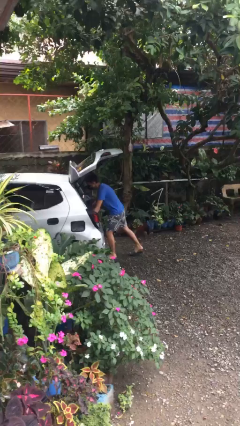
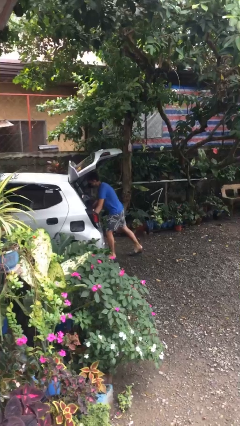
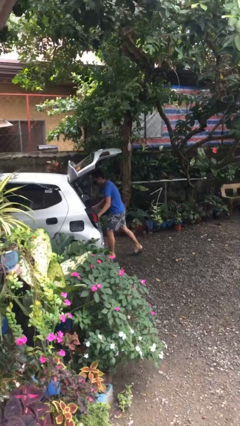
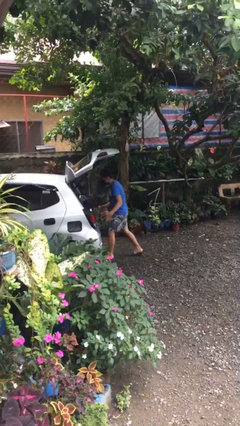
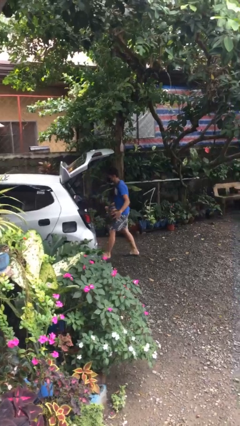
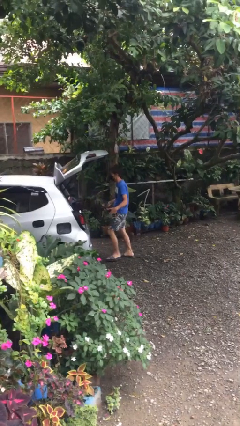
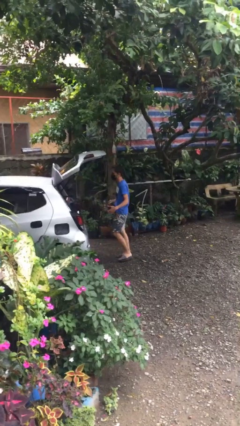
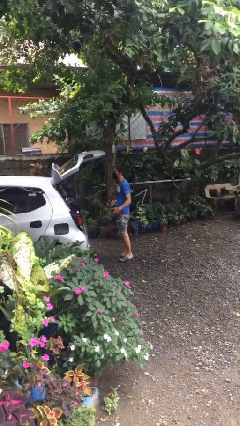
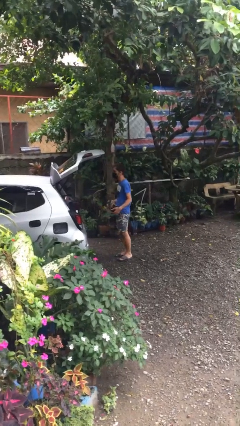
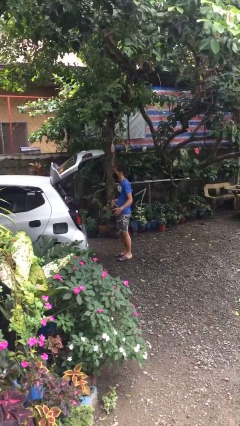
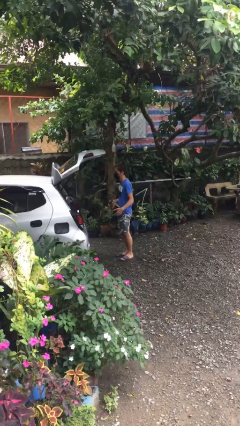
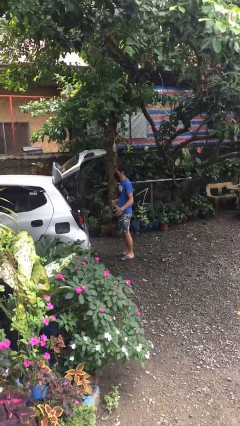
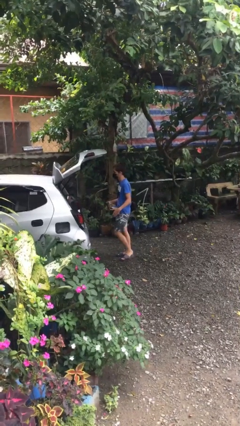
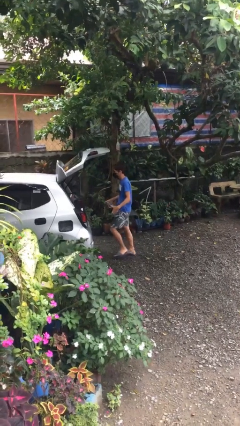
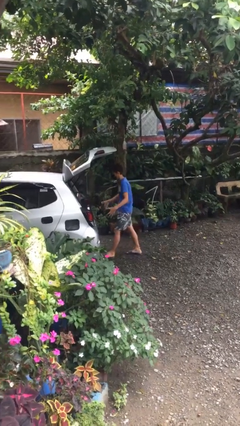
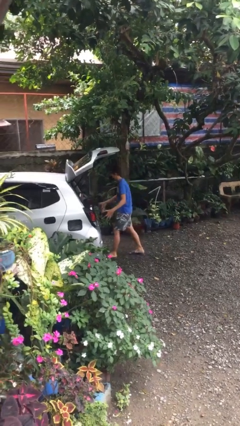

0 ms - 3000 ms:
person unloads car

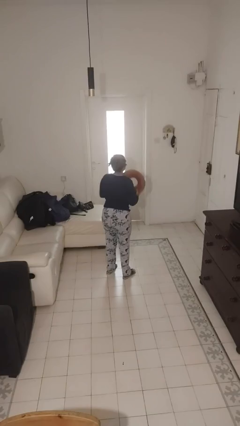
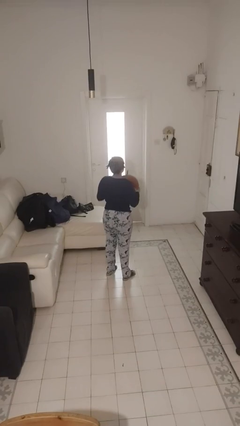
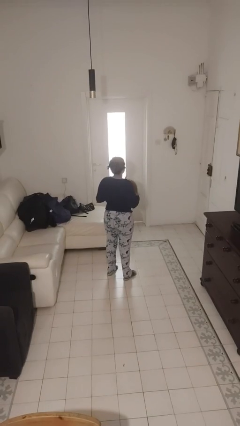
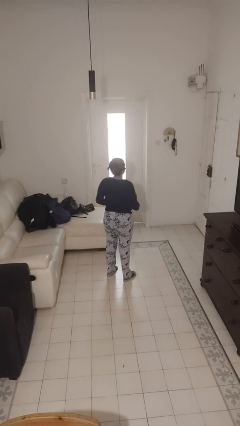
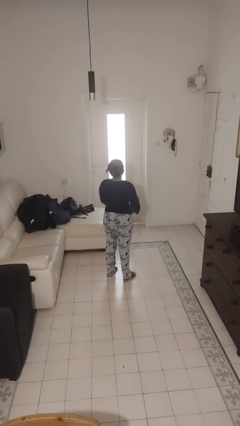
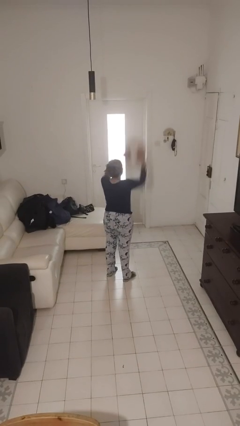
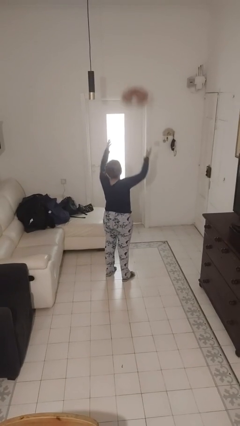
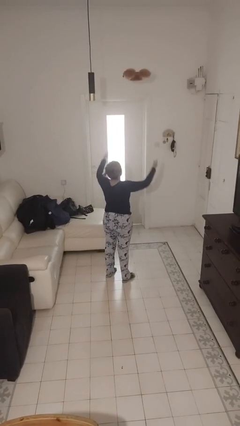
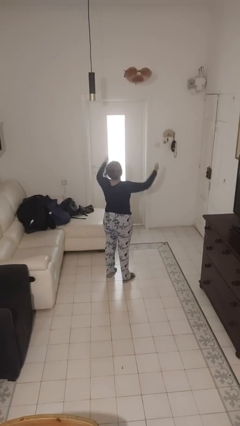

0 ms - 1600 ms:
person drops object

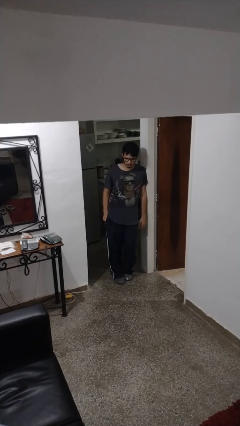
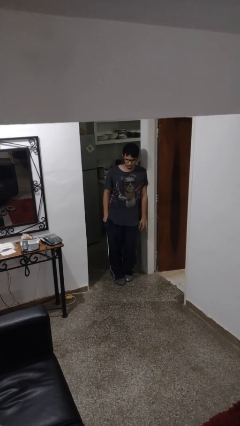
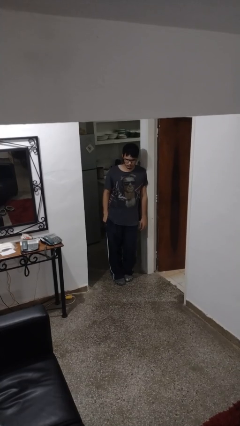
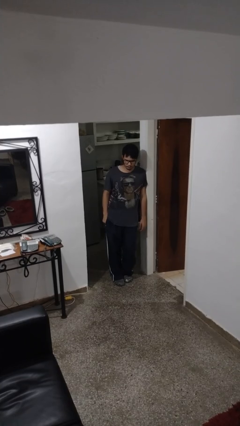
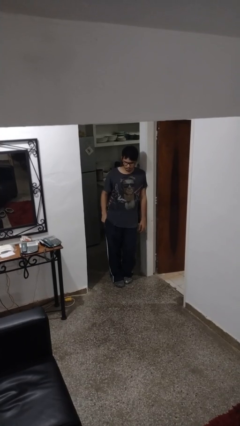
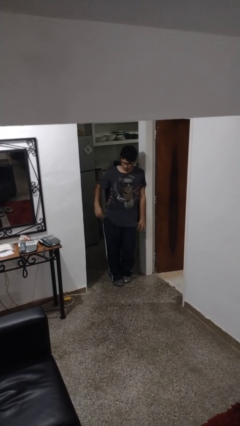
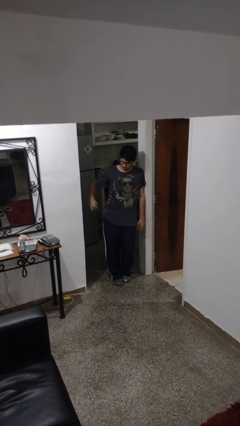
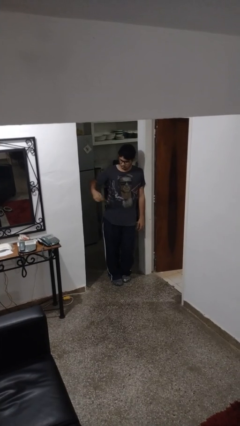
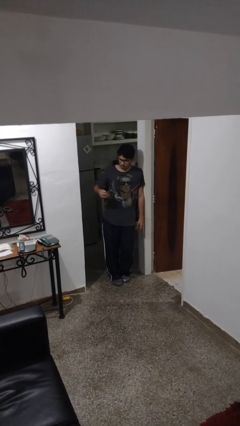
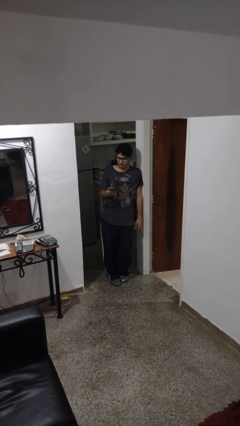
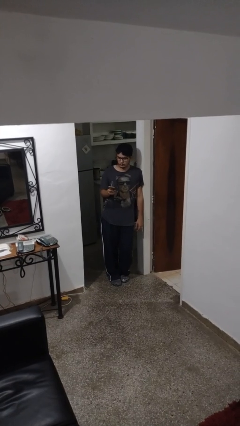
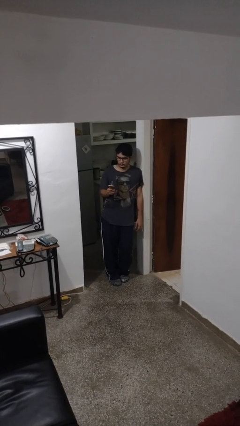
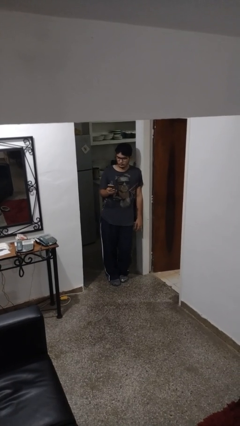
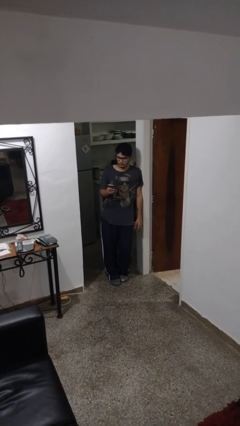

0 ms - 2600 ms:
person takes phone from pocket

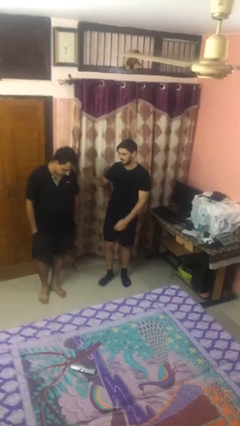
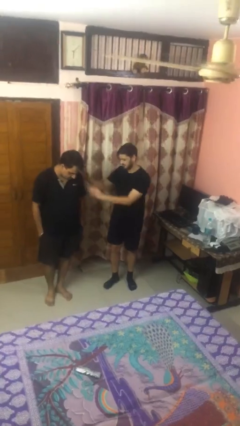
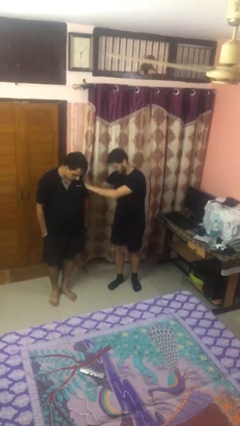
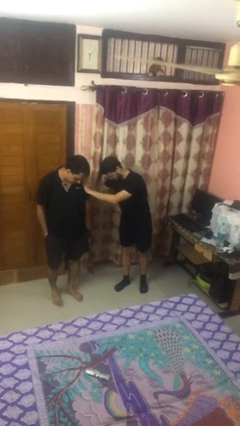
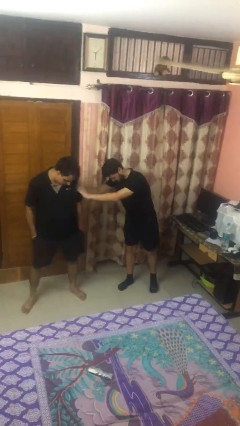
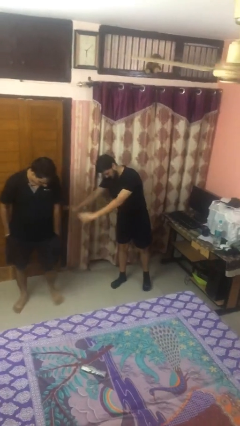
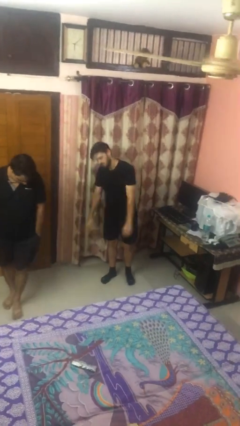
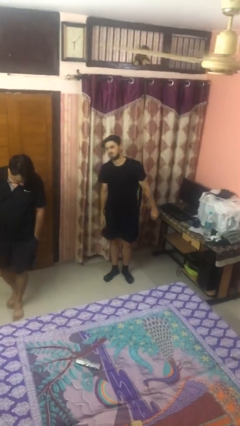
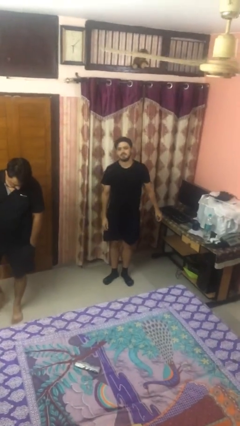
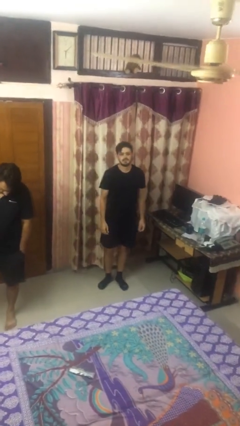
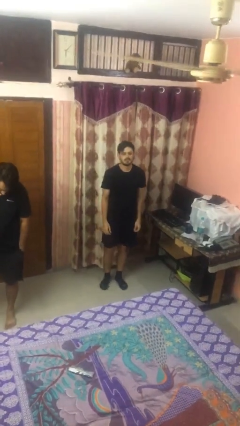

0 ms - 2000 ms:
person shoves person

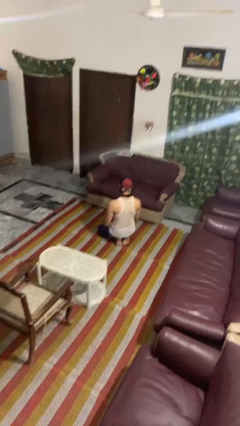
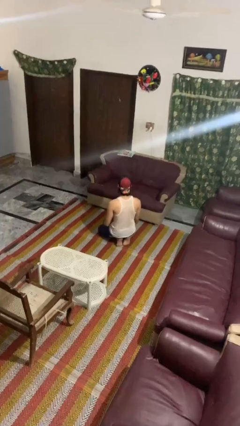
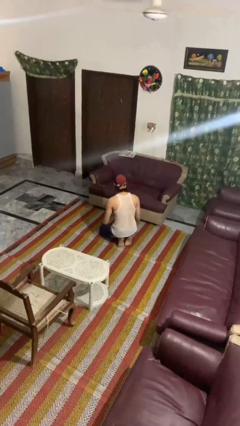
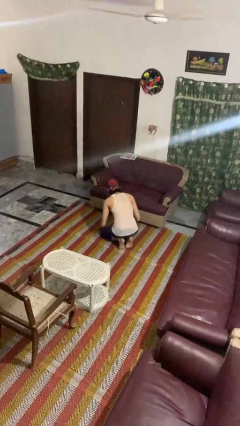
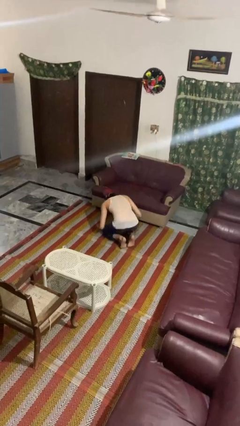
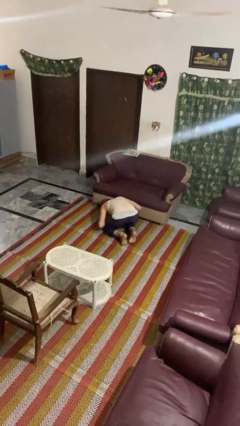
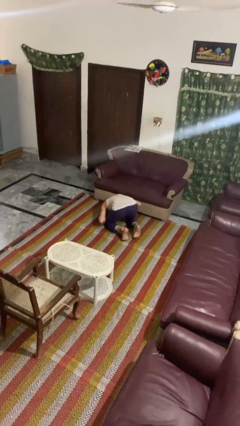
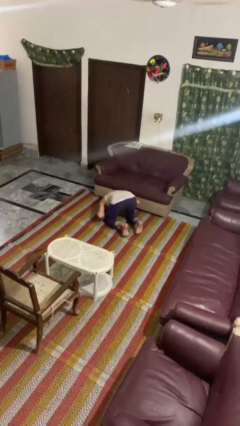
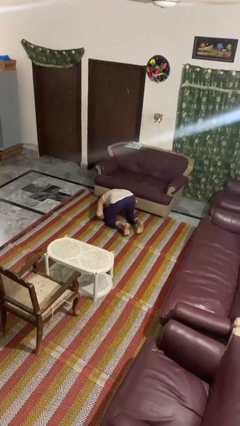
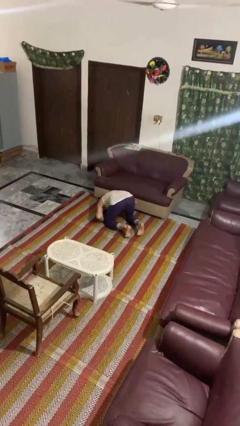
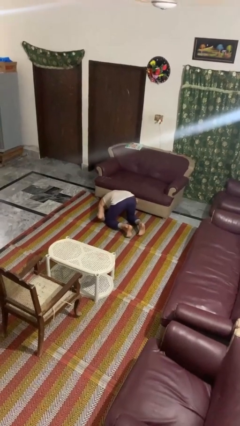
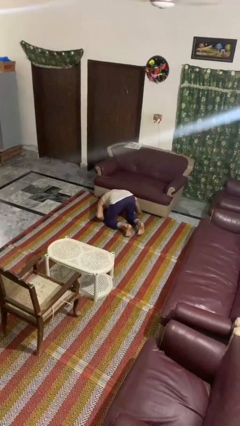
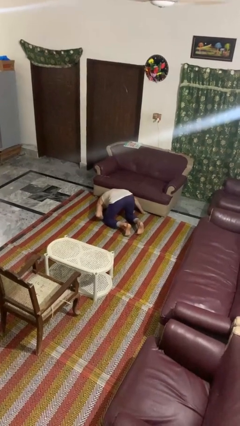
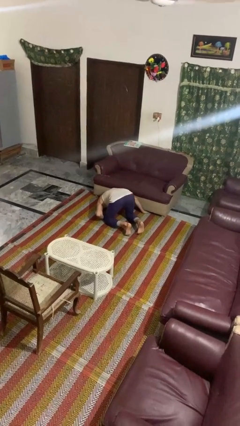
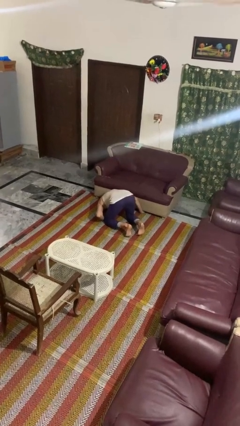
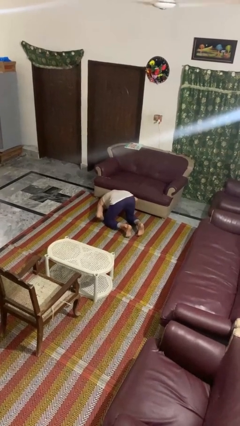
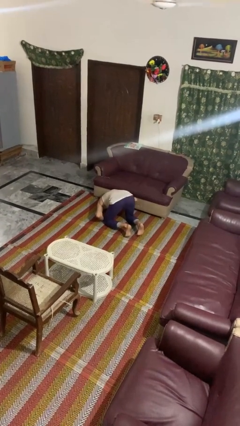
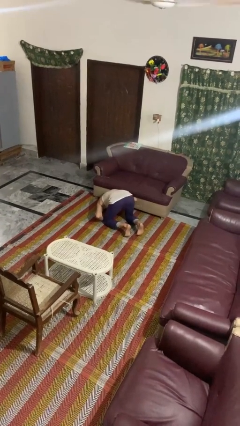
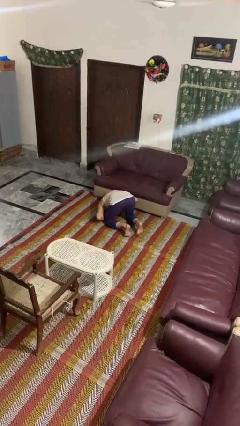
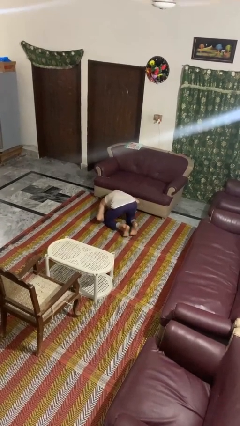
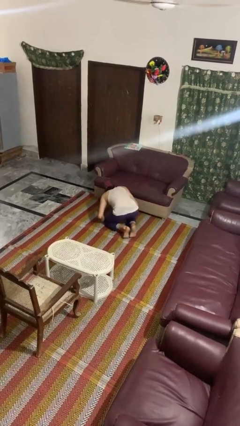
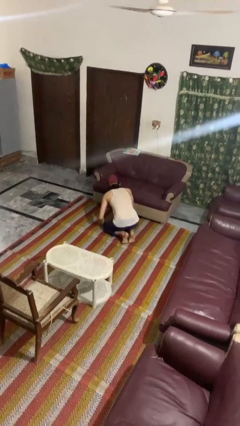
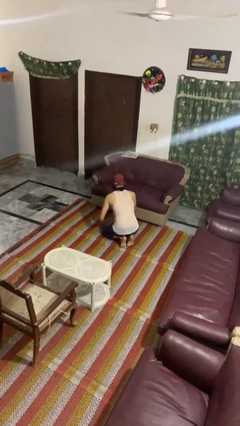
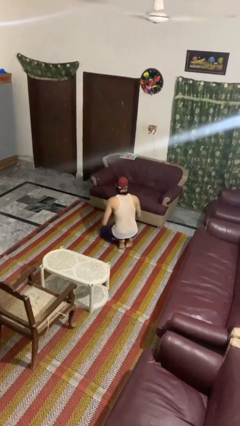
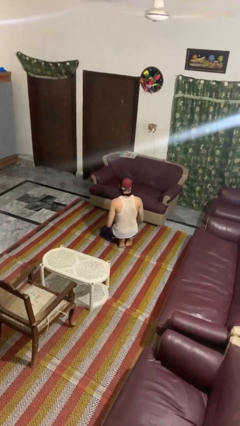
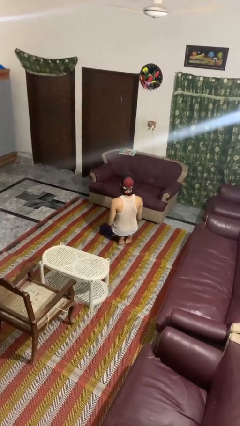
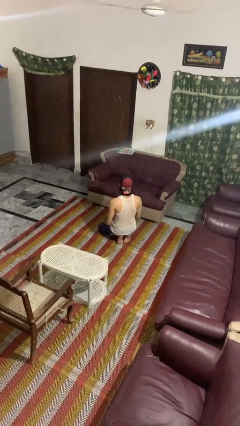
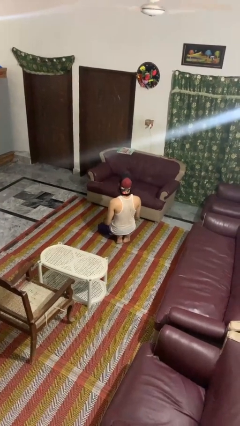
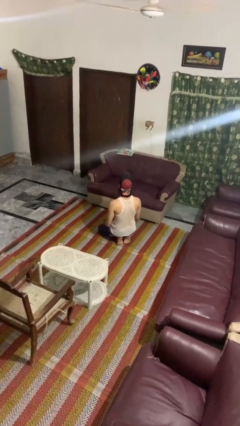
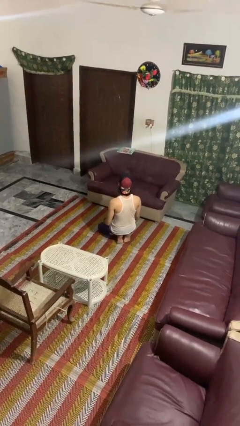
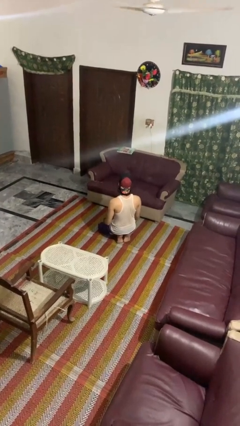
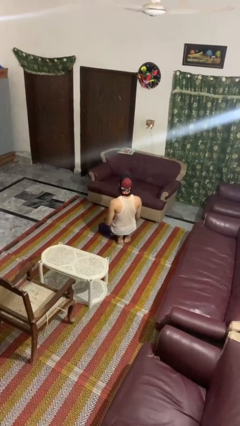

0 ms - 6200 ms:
person searches under couch

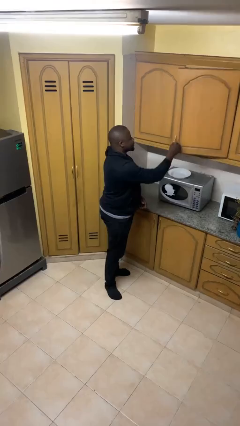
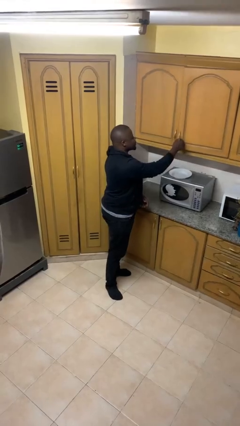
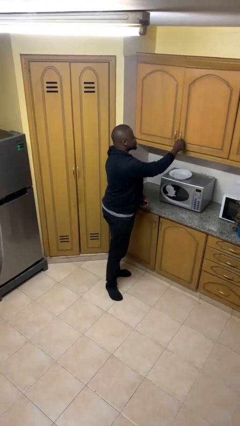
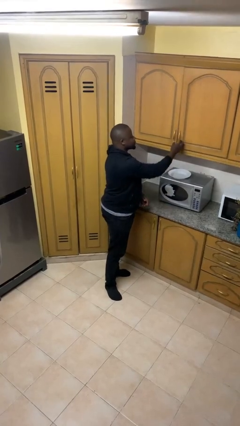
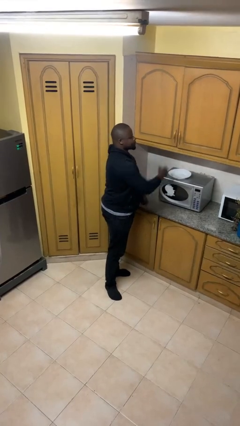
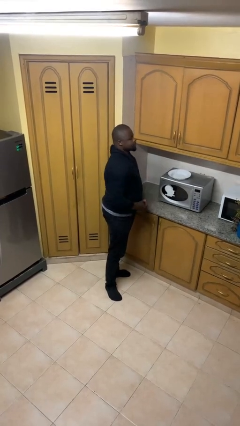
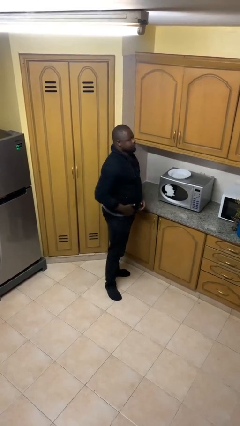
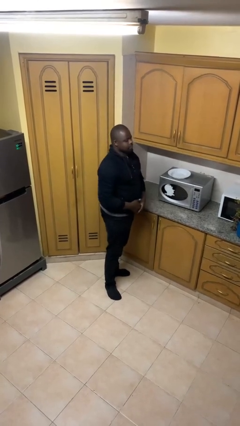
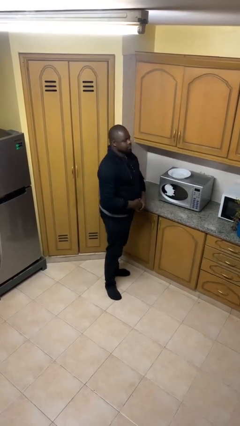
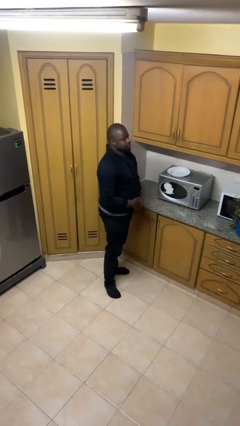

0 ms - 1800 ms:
person closes cabinet

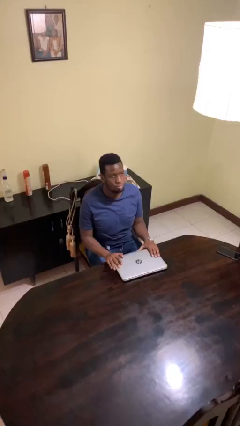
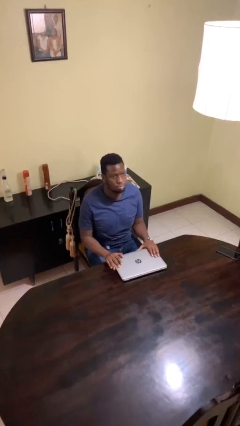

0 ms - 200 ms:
person interacts with laptop
